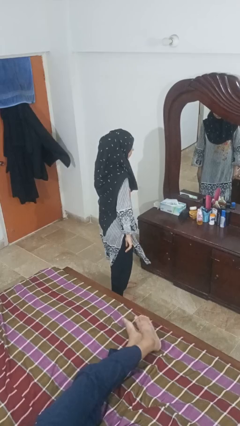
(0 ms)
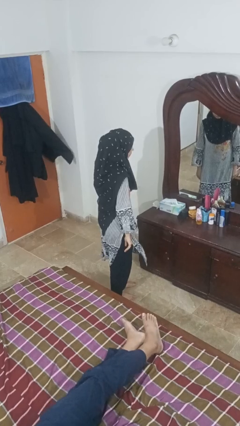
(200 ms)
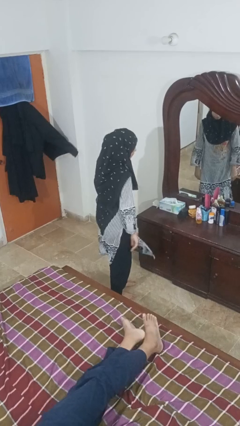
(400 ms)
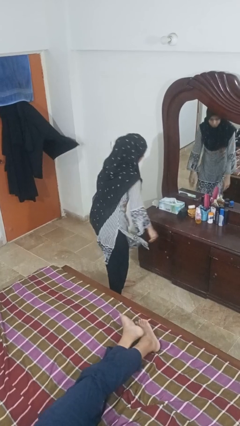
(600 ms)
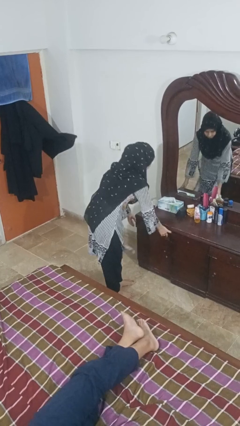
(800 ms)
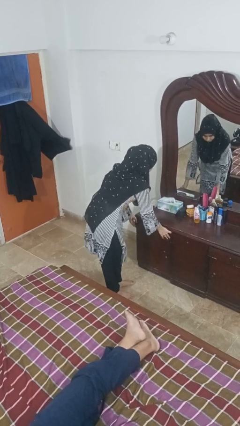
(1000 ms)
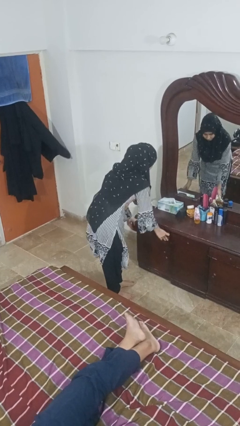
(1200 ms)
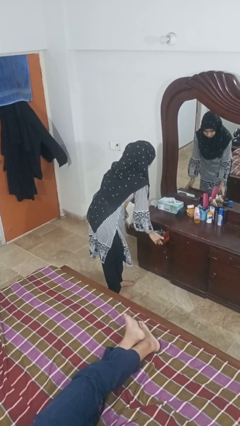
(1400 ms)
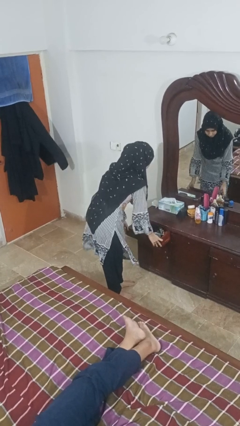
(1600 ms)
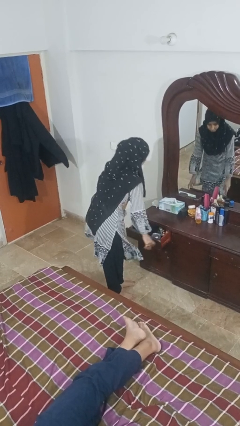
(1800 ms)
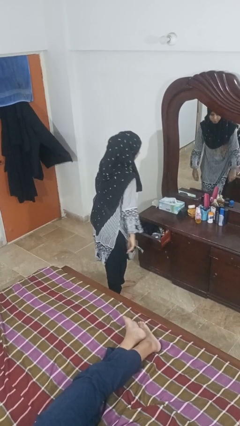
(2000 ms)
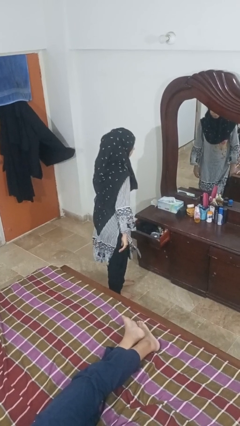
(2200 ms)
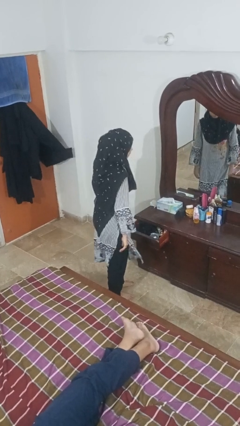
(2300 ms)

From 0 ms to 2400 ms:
person opens dresser drawer

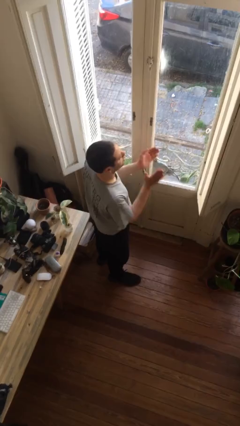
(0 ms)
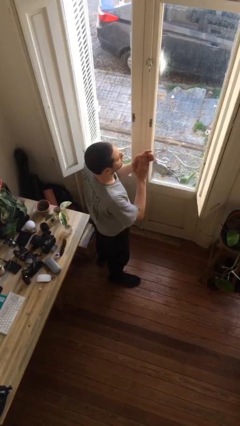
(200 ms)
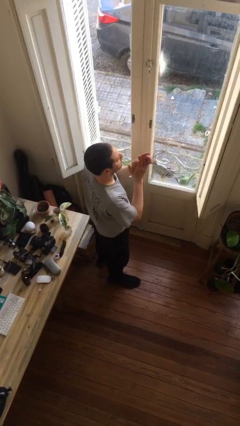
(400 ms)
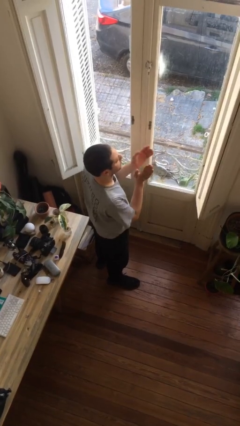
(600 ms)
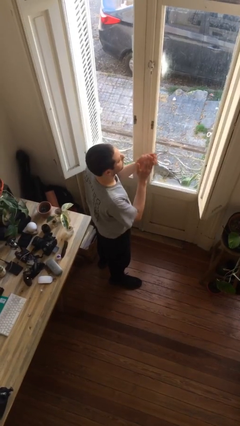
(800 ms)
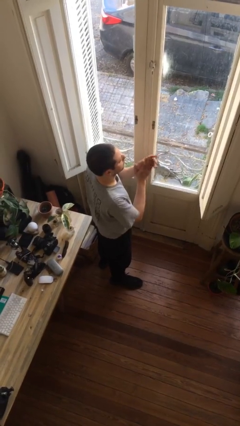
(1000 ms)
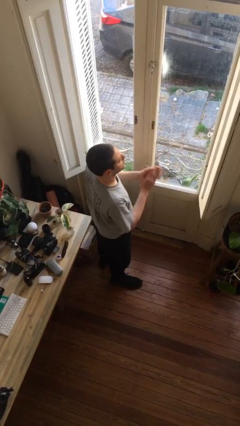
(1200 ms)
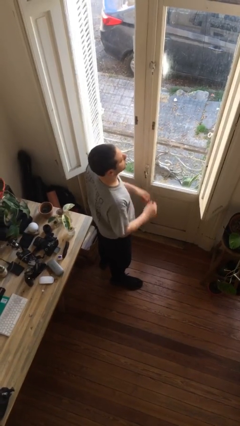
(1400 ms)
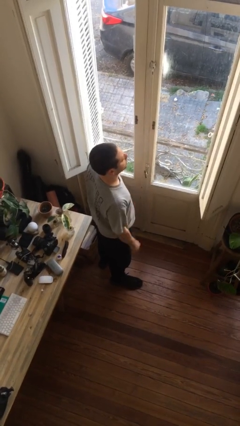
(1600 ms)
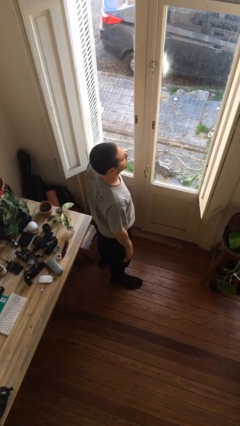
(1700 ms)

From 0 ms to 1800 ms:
person claps hands

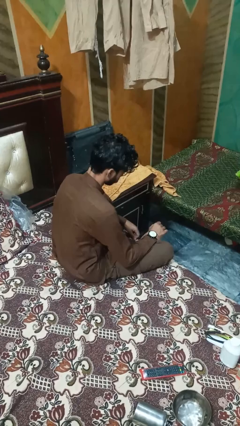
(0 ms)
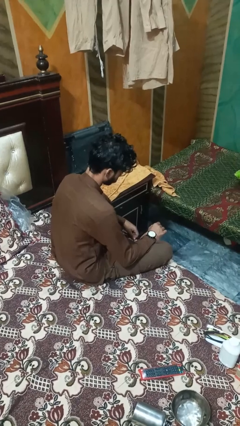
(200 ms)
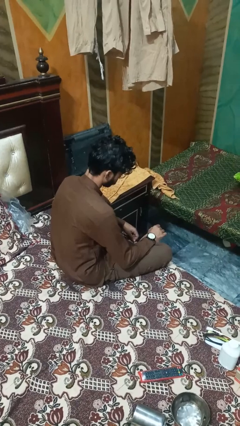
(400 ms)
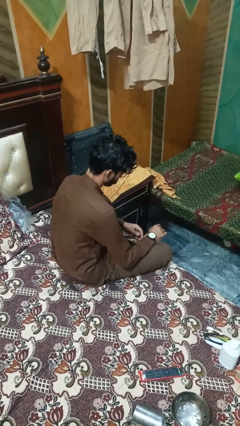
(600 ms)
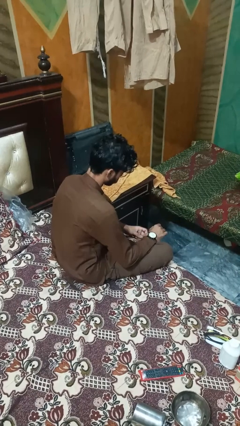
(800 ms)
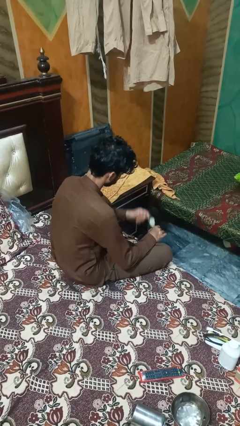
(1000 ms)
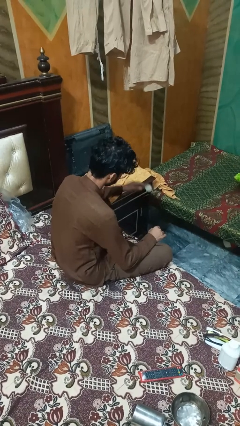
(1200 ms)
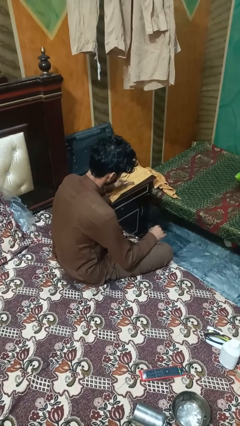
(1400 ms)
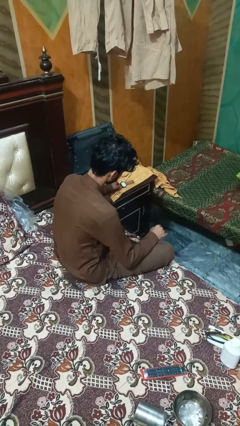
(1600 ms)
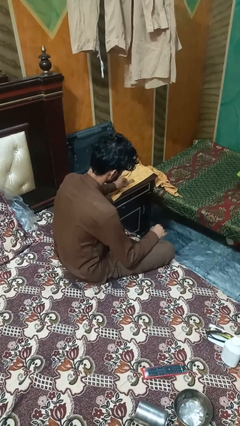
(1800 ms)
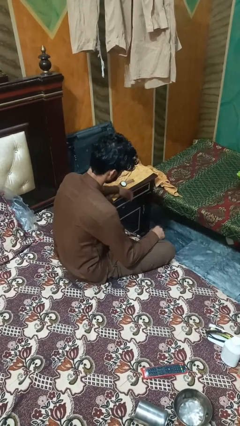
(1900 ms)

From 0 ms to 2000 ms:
person takes off wristwatch

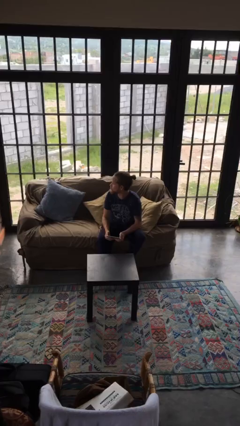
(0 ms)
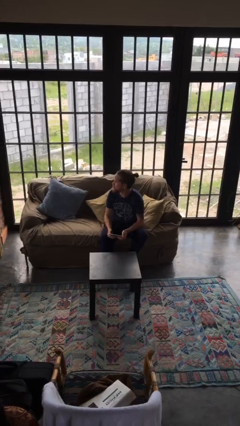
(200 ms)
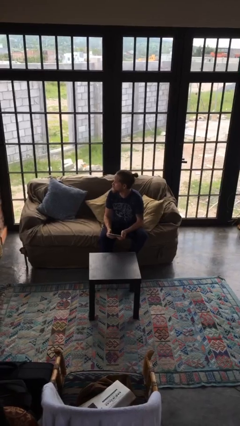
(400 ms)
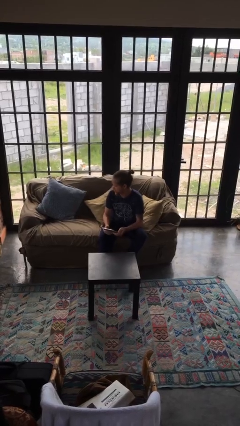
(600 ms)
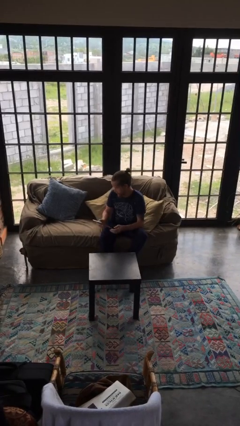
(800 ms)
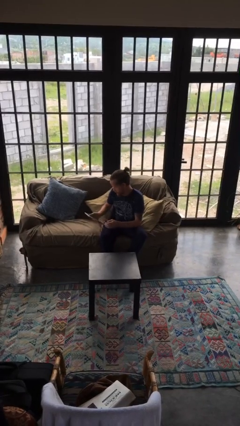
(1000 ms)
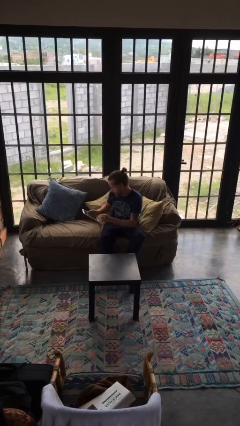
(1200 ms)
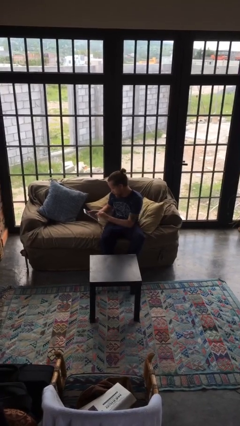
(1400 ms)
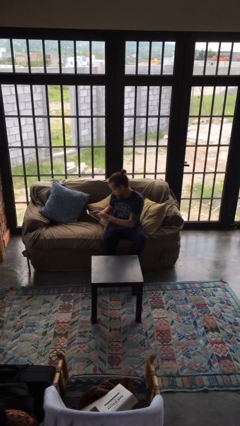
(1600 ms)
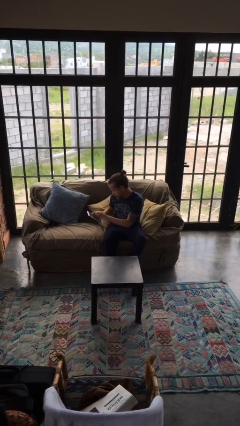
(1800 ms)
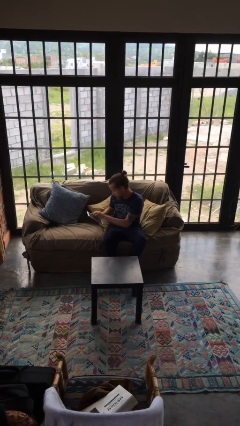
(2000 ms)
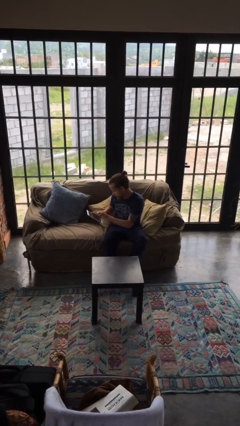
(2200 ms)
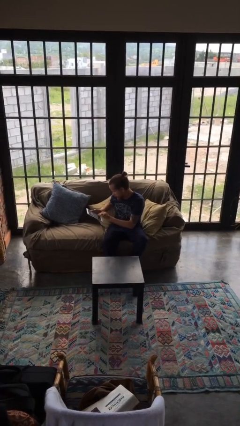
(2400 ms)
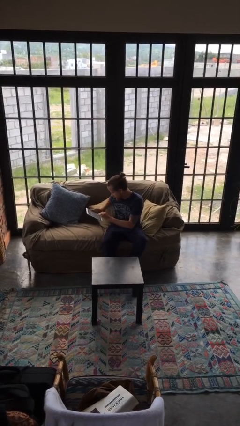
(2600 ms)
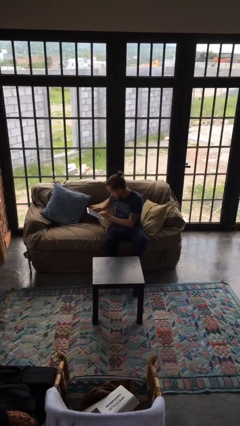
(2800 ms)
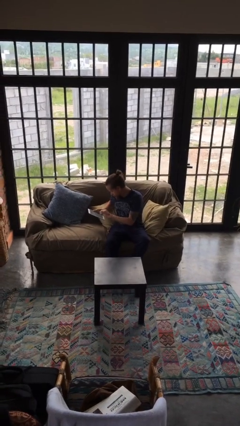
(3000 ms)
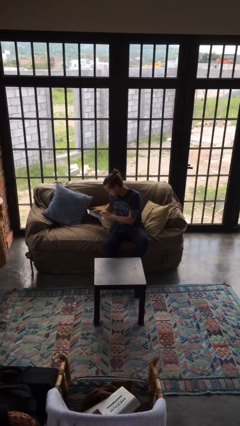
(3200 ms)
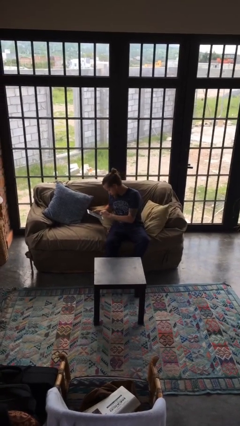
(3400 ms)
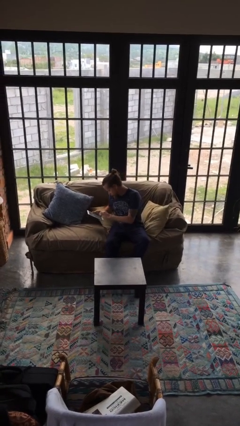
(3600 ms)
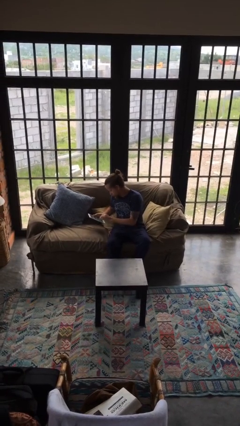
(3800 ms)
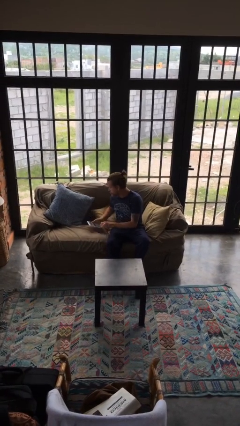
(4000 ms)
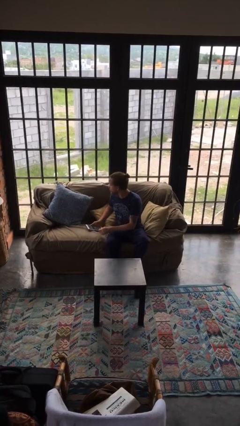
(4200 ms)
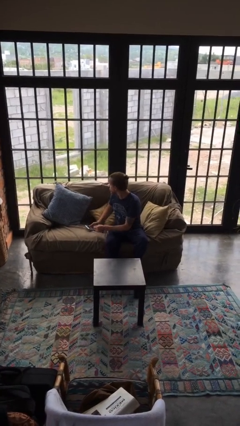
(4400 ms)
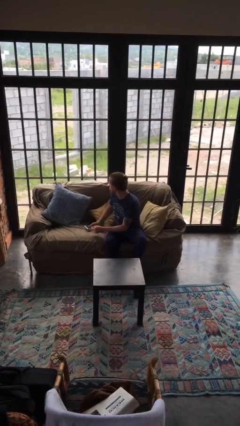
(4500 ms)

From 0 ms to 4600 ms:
person interacts with tablet

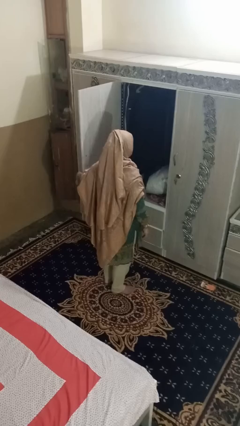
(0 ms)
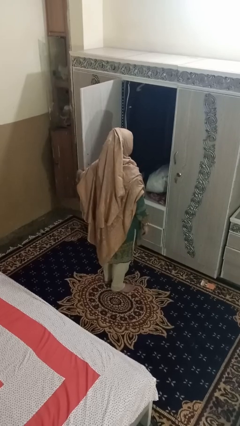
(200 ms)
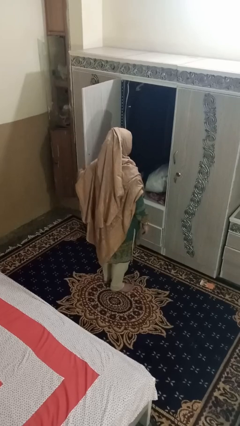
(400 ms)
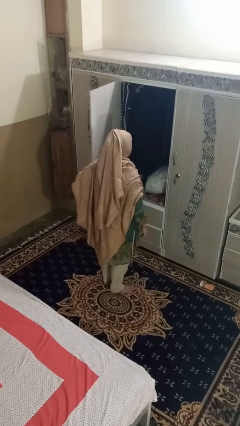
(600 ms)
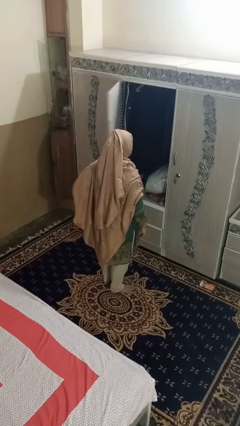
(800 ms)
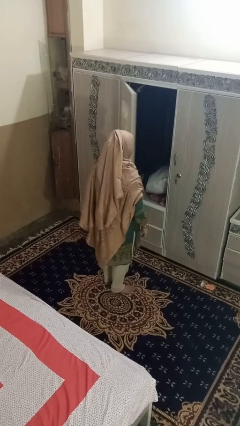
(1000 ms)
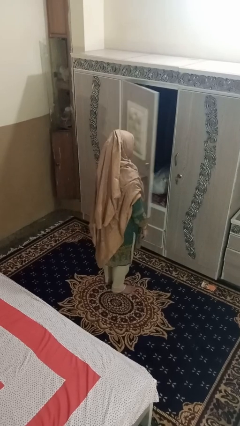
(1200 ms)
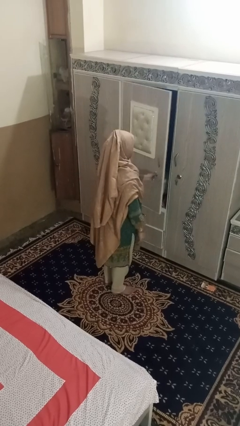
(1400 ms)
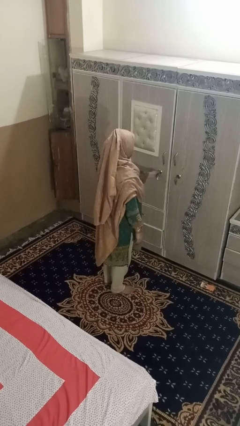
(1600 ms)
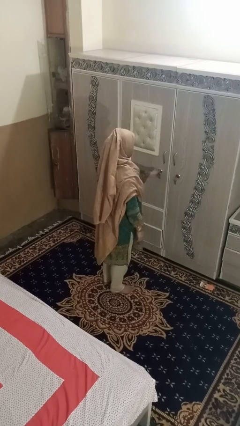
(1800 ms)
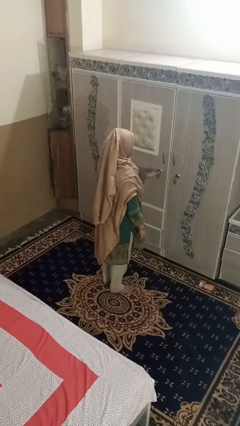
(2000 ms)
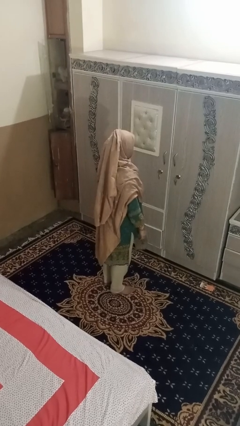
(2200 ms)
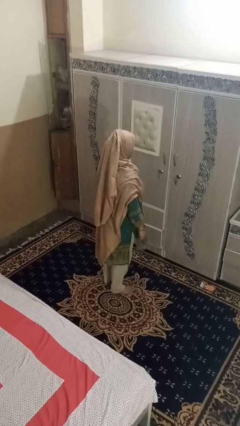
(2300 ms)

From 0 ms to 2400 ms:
person closes dresser drawer

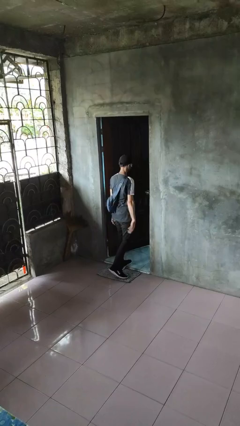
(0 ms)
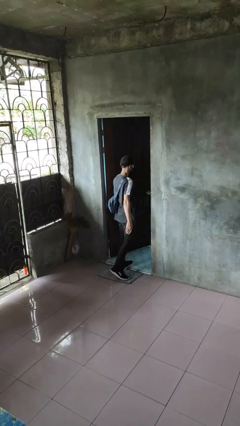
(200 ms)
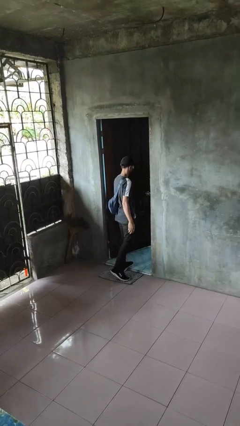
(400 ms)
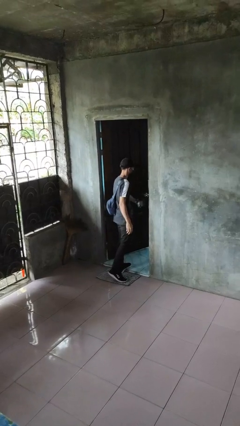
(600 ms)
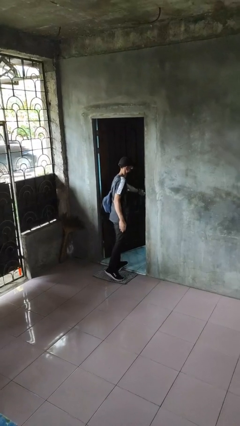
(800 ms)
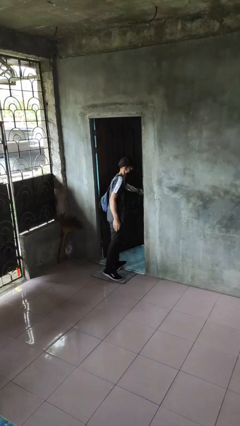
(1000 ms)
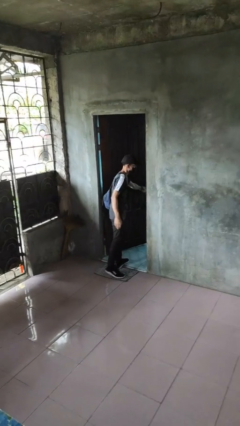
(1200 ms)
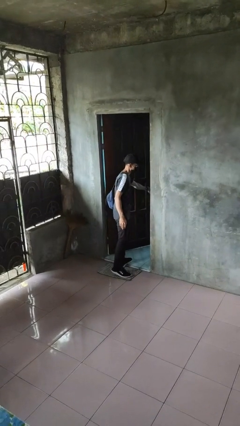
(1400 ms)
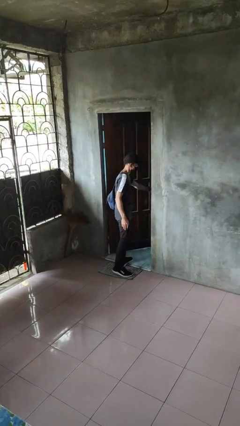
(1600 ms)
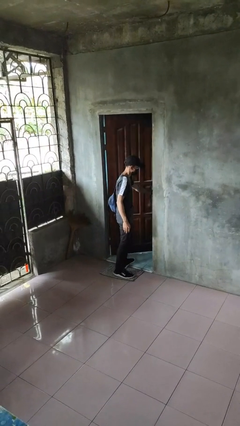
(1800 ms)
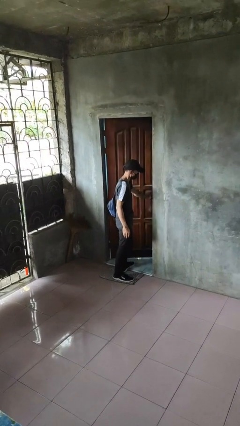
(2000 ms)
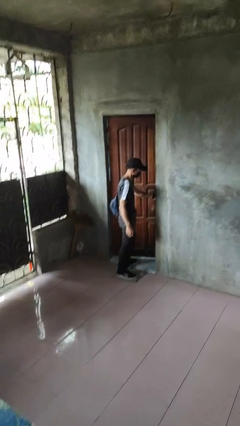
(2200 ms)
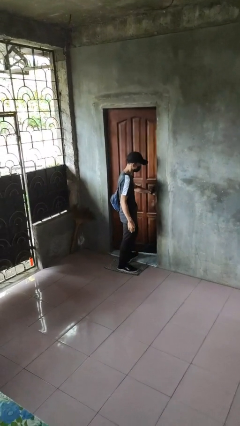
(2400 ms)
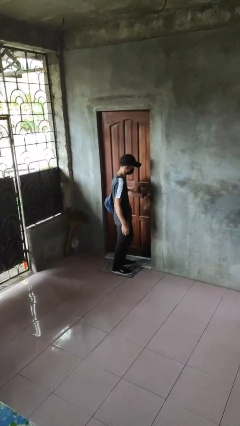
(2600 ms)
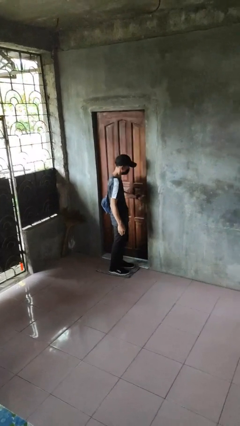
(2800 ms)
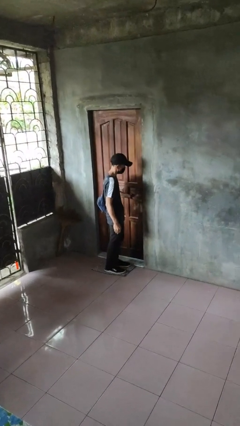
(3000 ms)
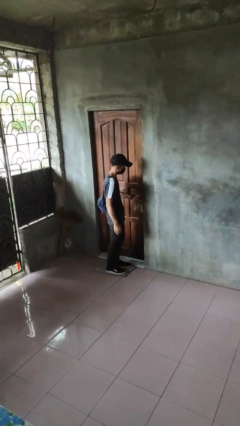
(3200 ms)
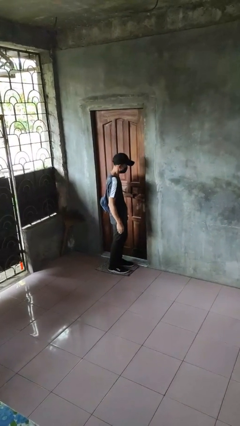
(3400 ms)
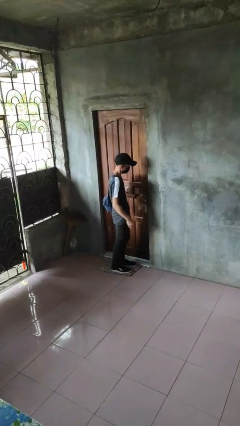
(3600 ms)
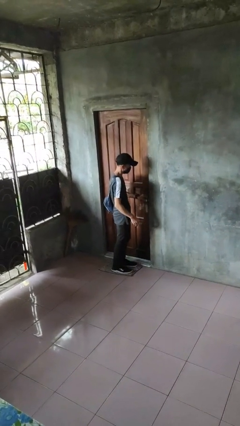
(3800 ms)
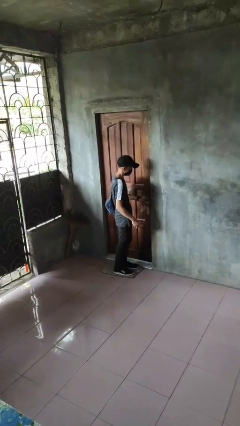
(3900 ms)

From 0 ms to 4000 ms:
person closes facility door

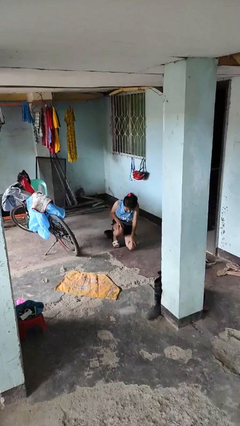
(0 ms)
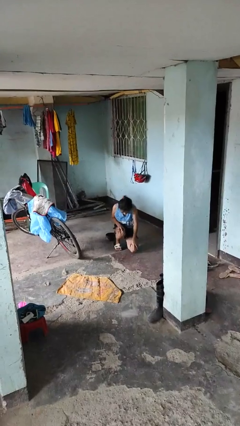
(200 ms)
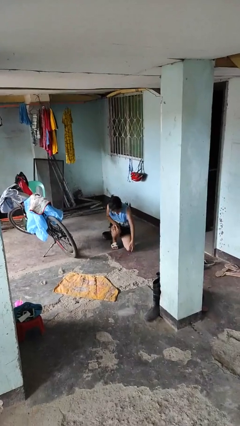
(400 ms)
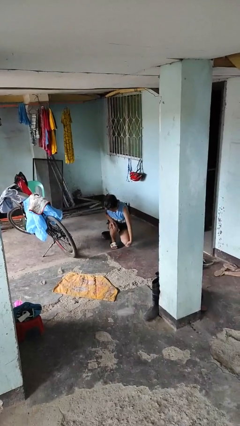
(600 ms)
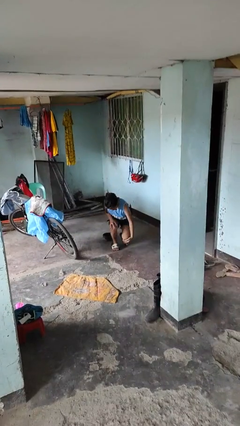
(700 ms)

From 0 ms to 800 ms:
person lies down on floor
